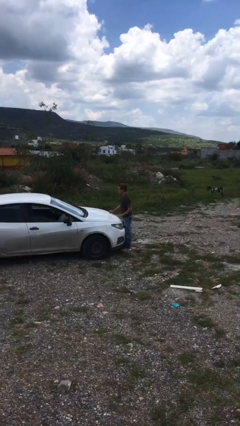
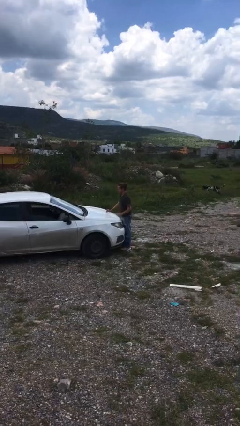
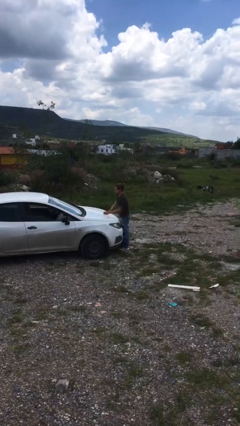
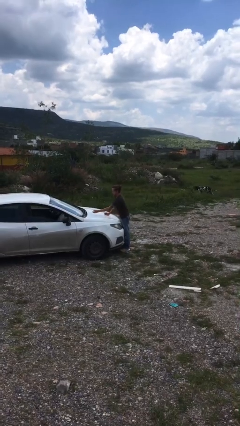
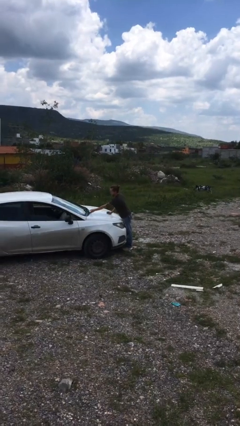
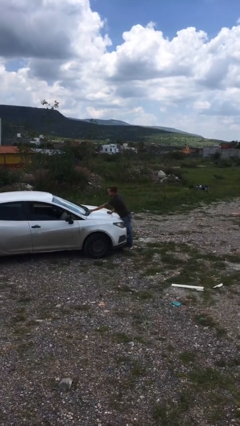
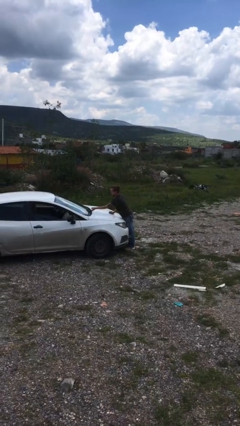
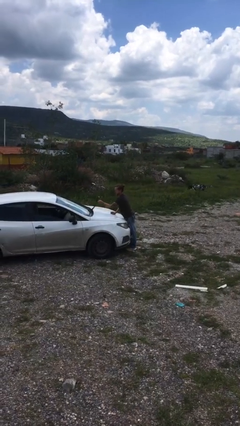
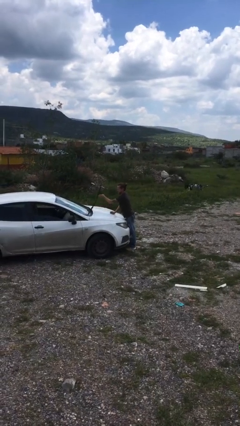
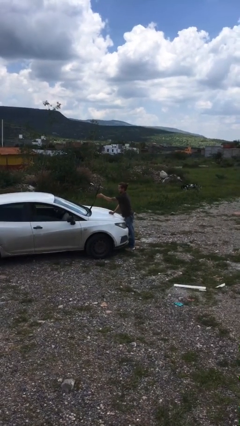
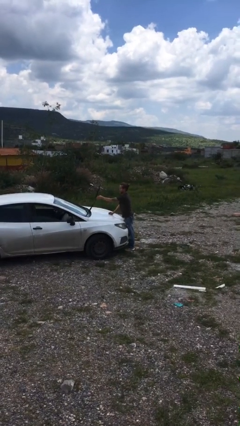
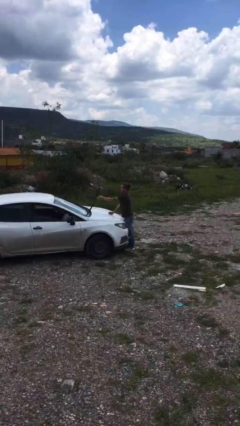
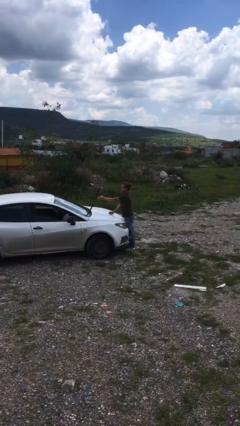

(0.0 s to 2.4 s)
person flips up car wipers

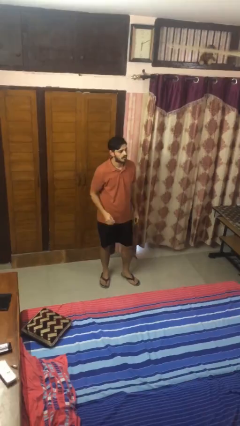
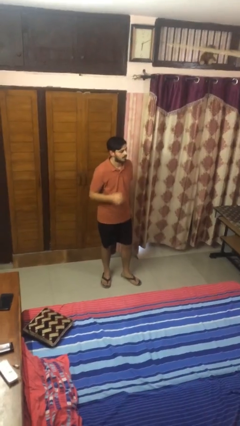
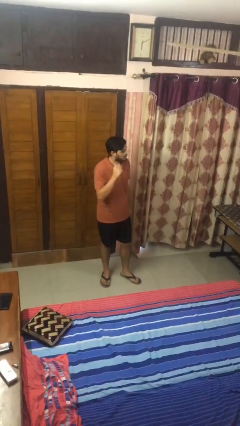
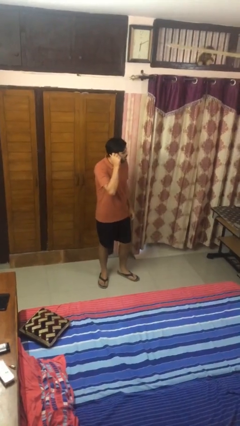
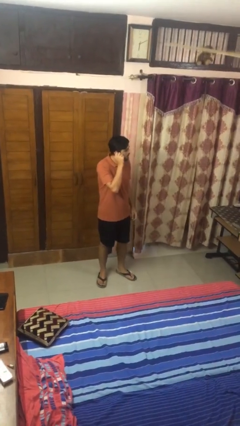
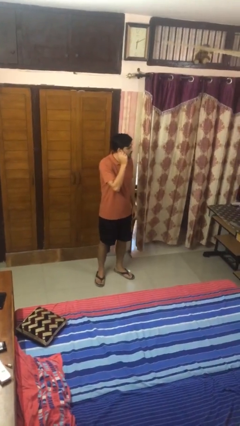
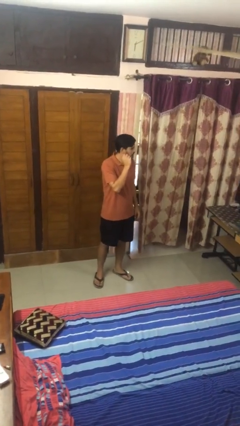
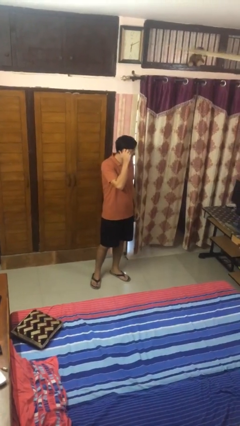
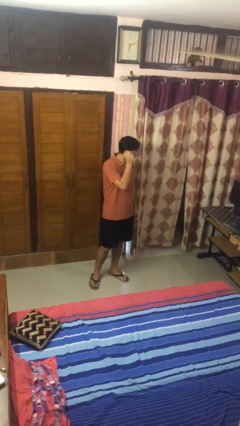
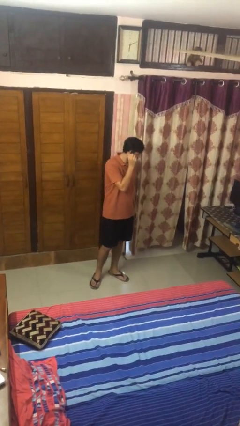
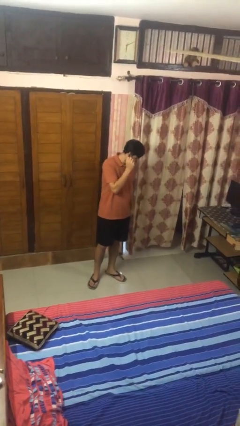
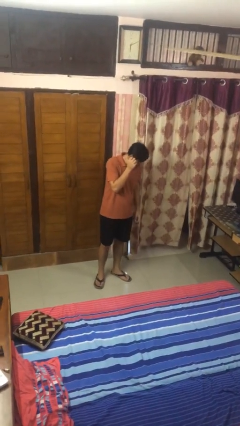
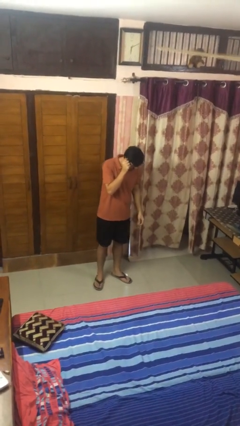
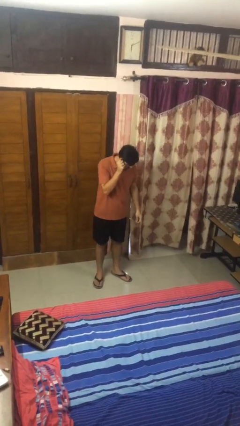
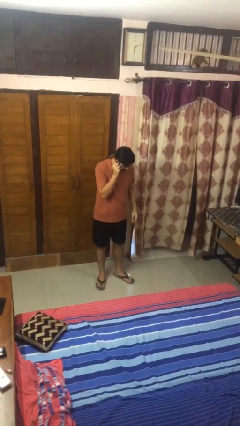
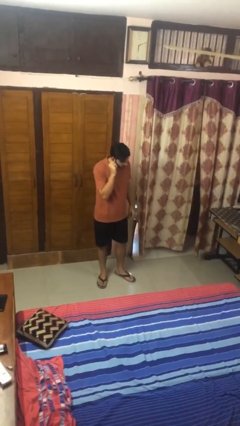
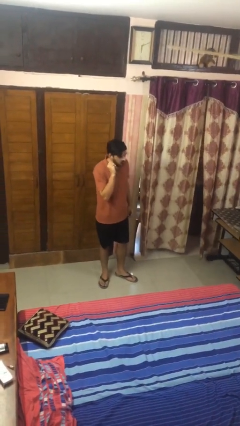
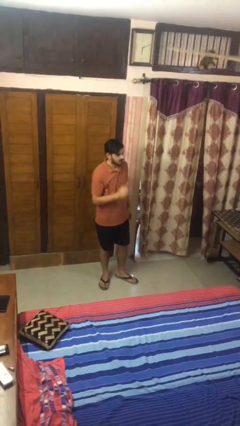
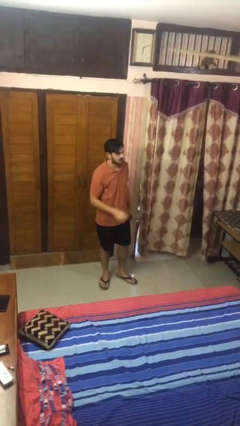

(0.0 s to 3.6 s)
person touches earlobe

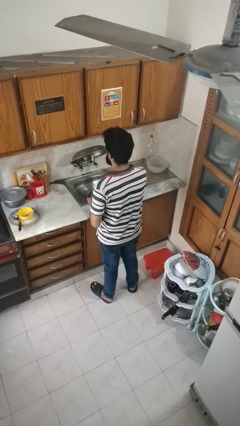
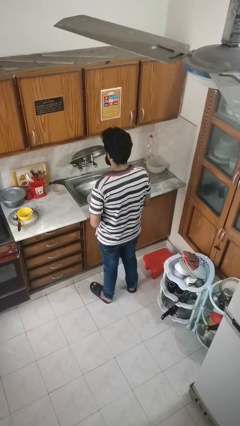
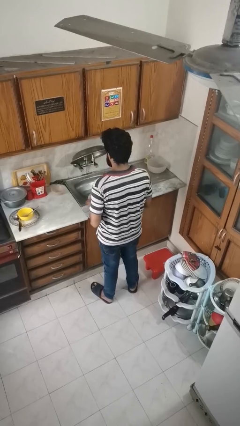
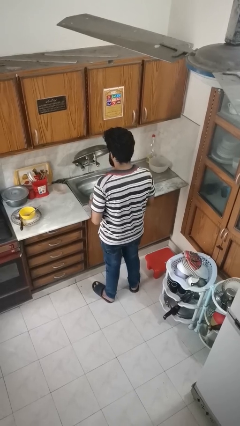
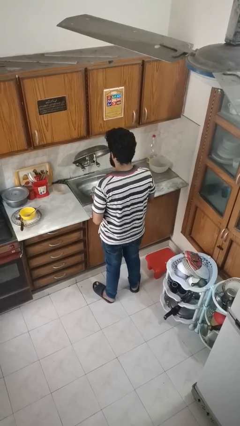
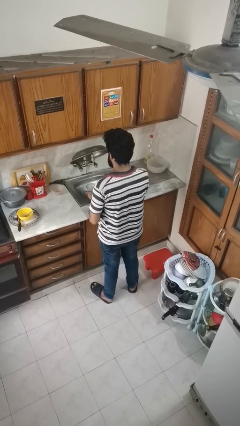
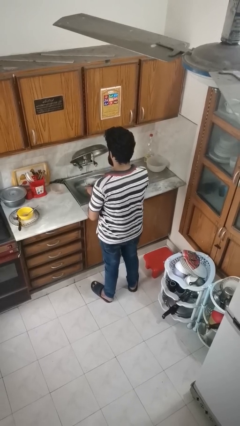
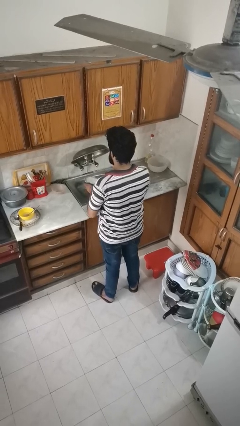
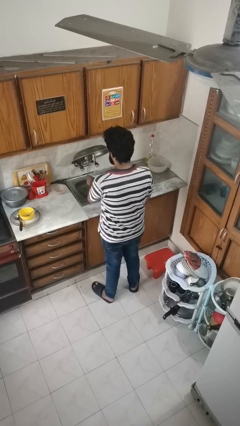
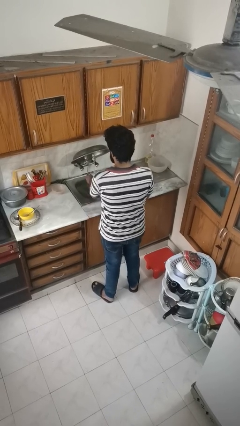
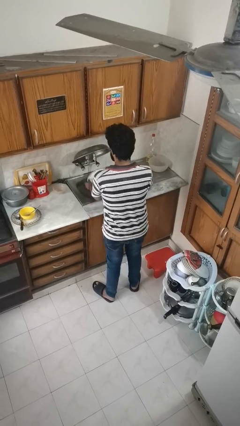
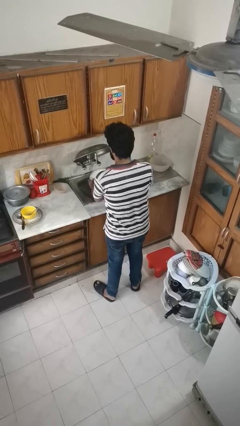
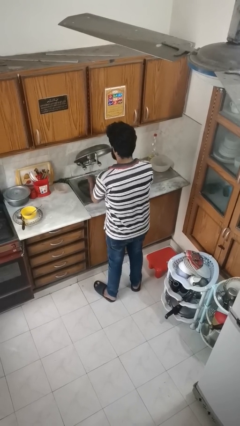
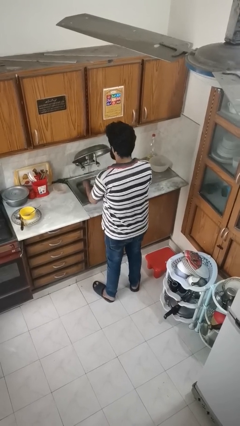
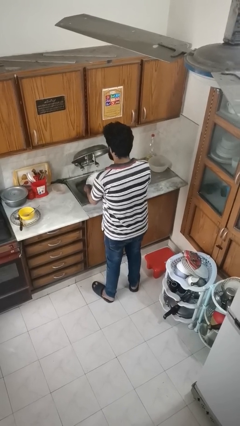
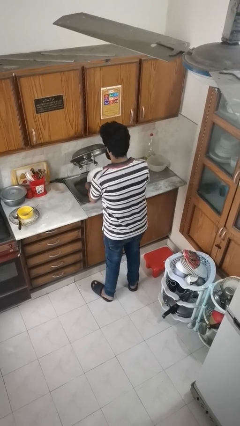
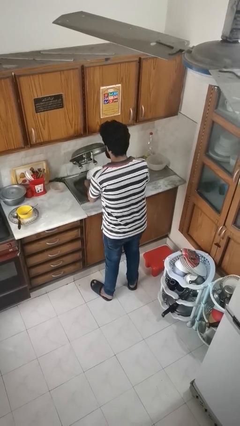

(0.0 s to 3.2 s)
person washes dish

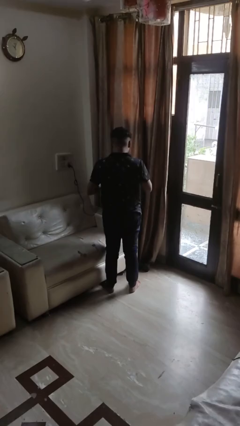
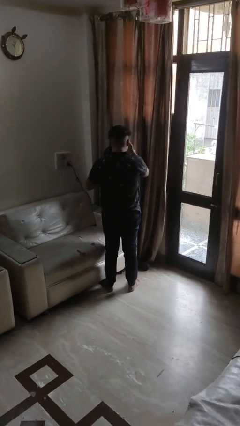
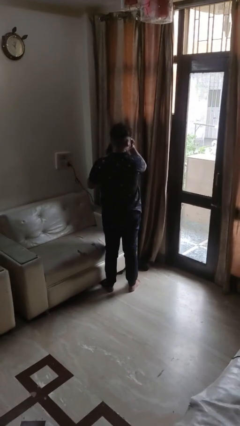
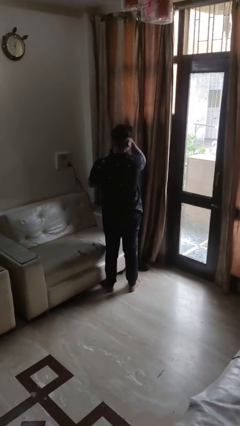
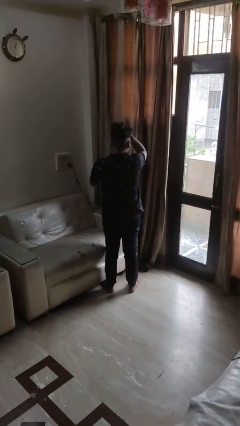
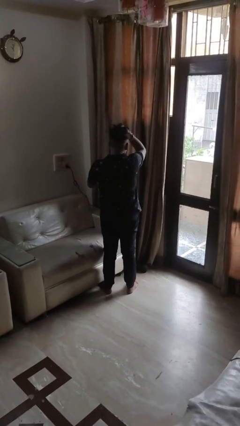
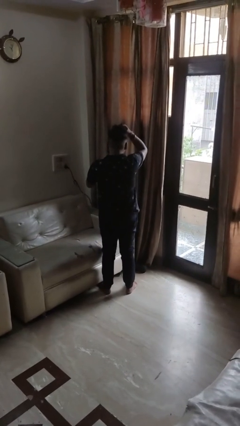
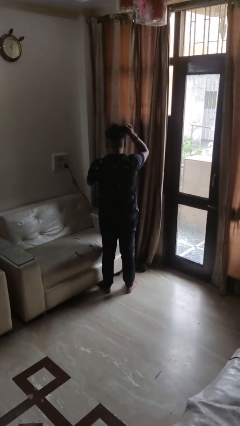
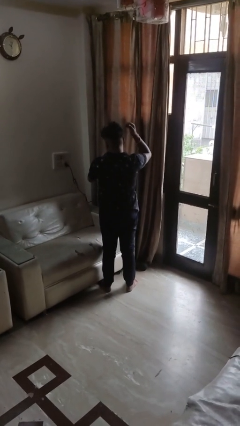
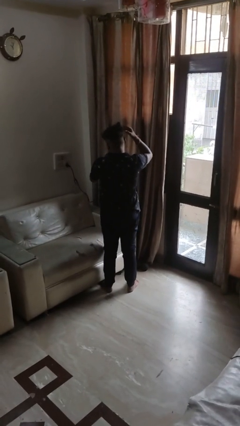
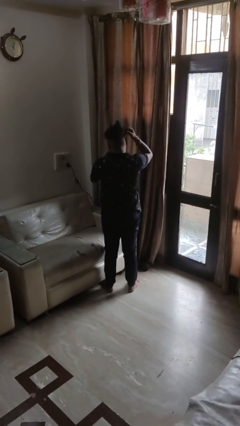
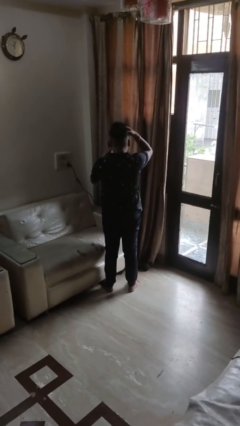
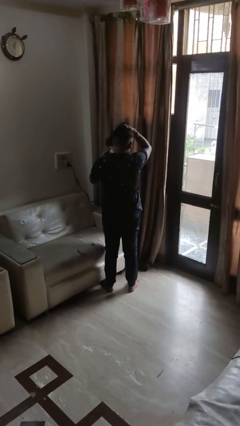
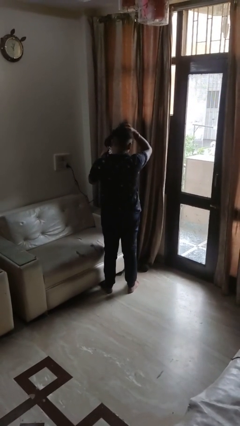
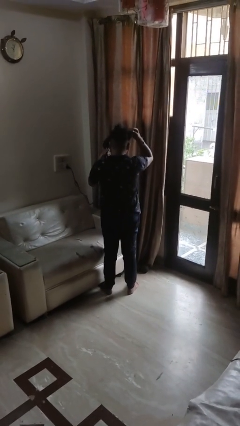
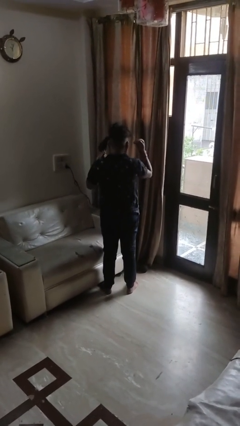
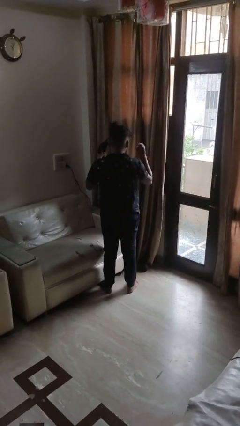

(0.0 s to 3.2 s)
person dries hair with hairdryer

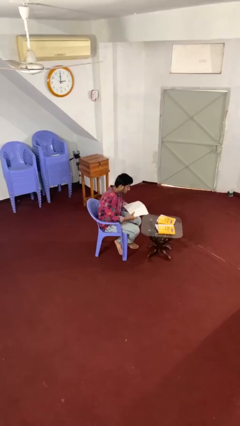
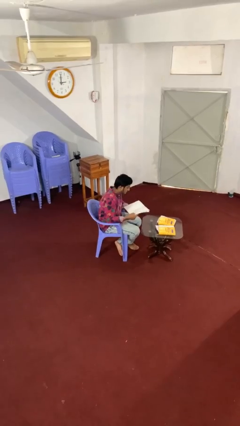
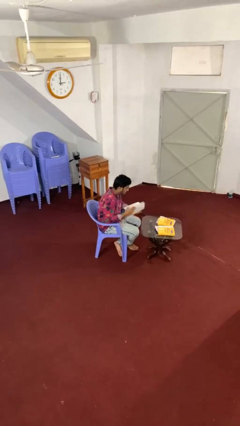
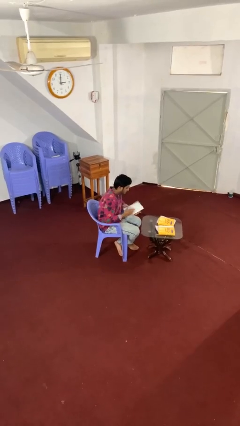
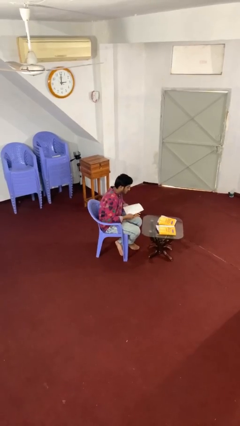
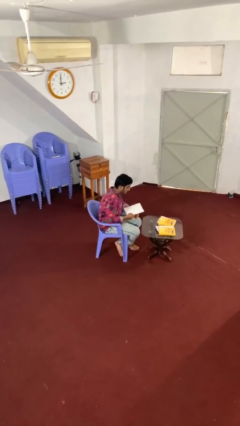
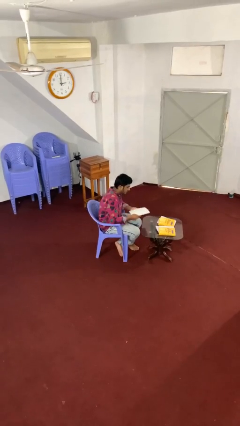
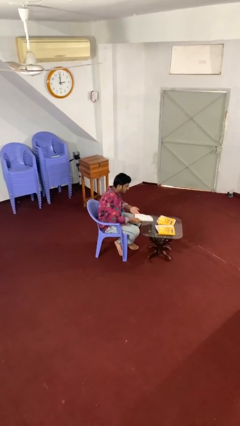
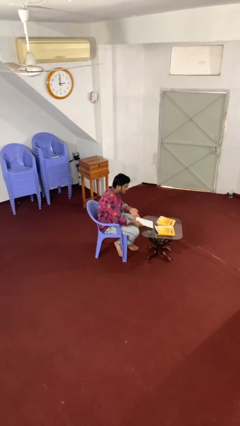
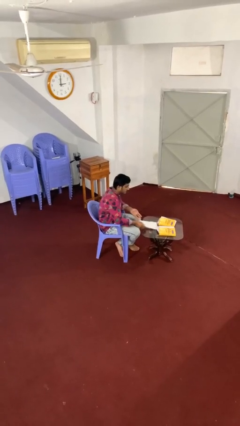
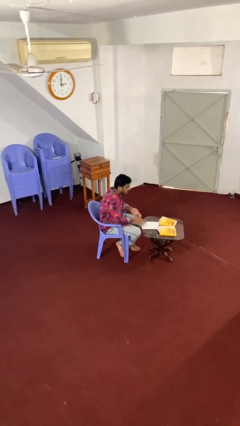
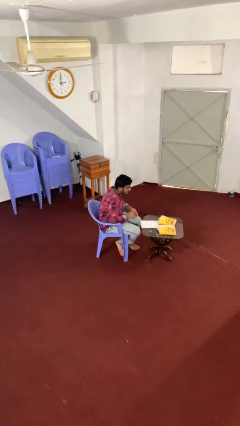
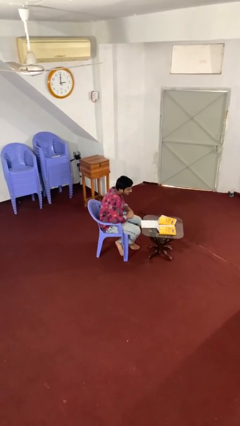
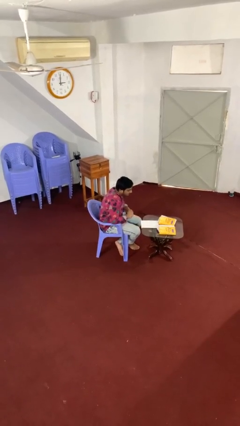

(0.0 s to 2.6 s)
person puts down object on table

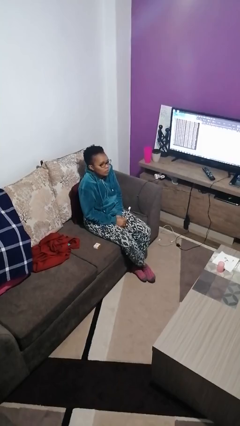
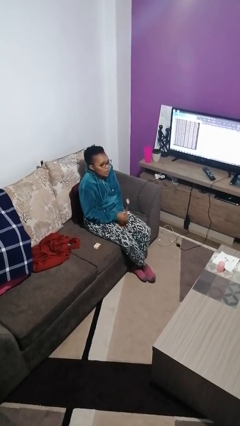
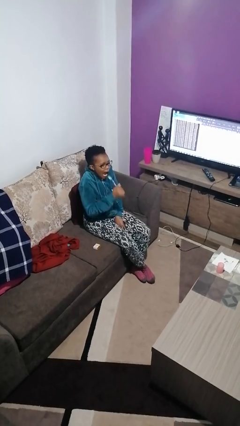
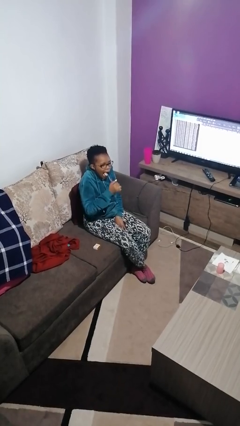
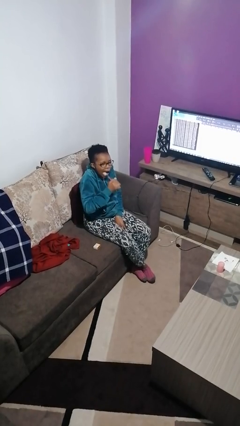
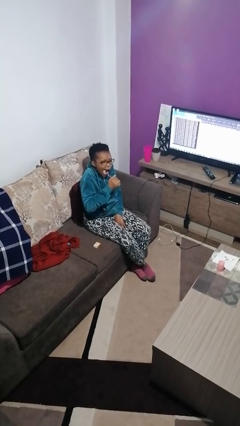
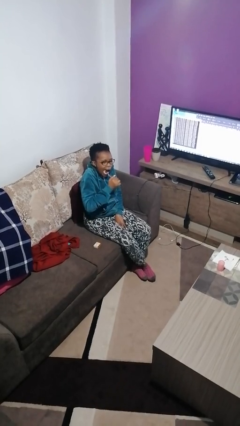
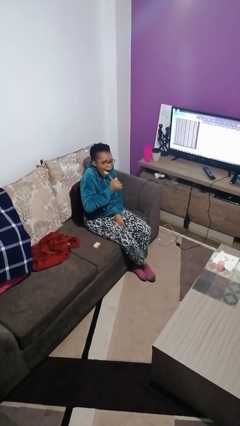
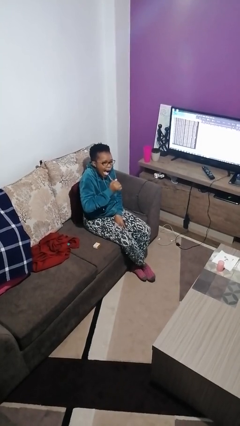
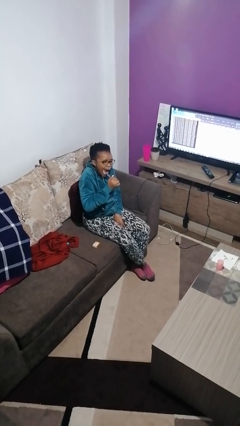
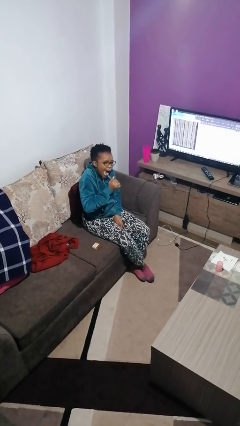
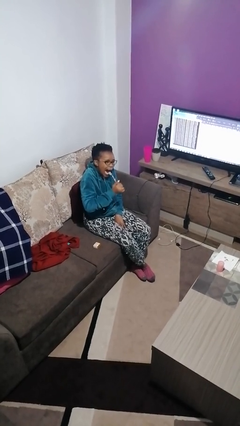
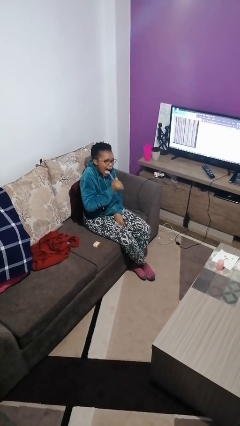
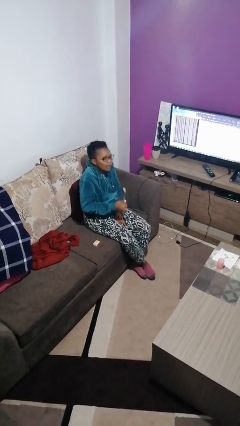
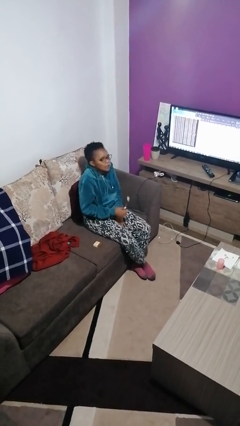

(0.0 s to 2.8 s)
person brushes teeth
